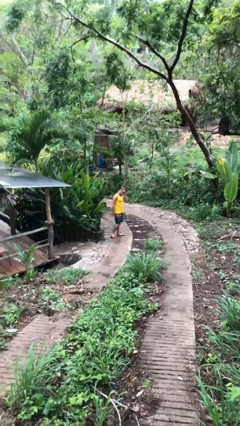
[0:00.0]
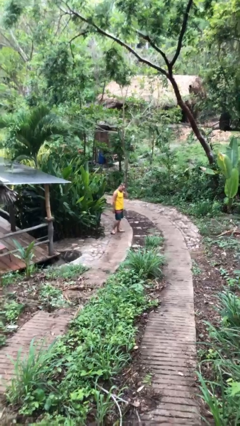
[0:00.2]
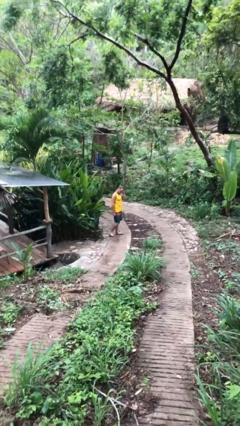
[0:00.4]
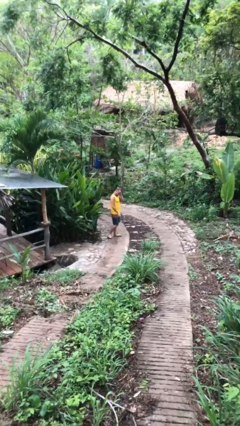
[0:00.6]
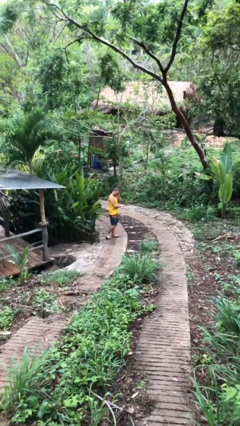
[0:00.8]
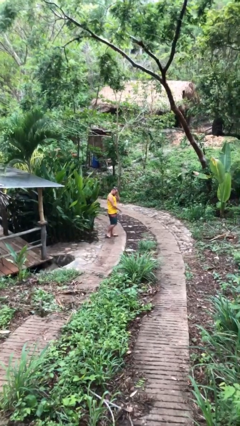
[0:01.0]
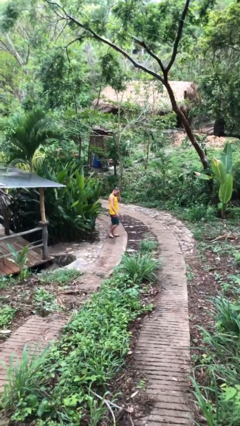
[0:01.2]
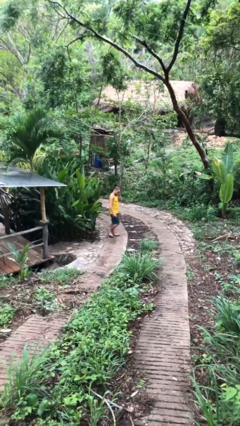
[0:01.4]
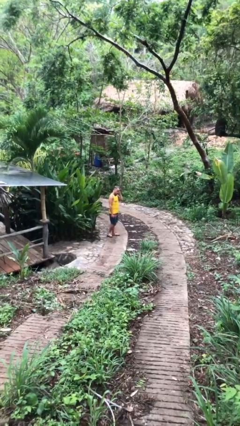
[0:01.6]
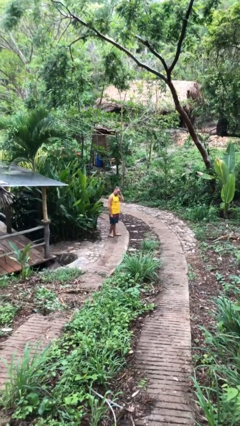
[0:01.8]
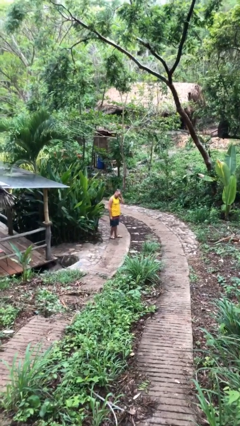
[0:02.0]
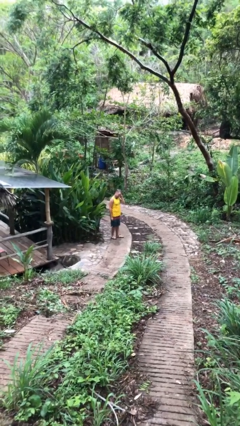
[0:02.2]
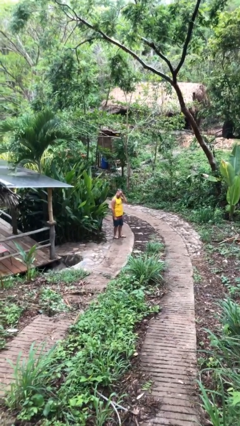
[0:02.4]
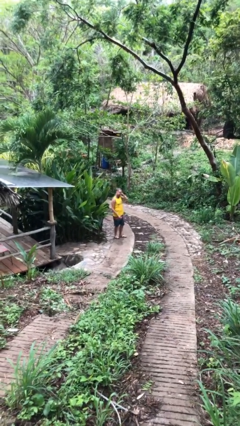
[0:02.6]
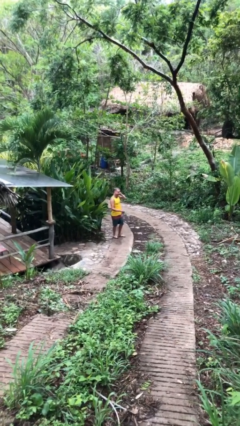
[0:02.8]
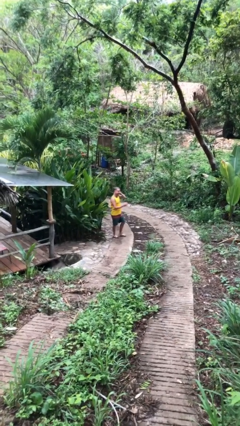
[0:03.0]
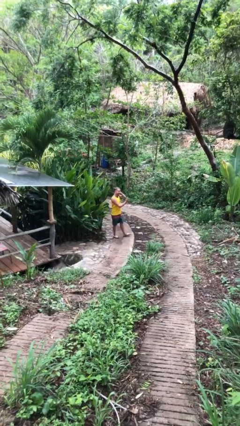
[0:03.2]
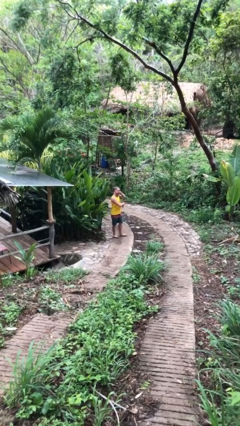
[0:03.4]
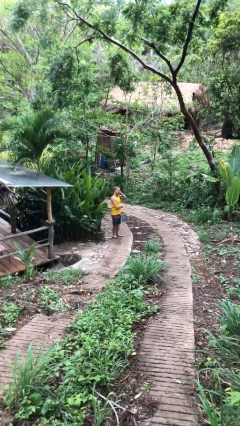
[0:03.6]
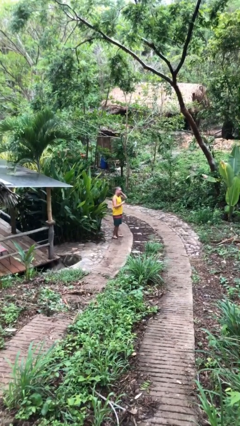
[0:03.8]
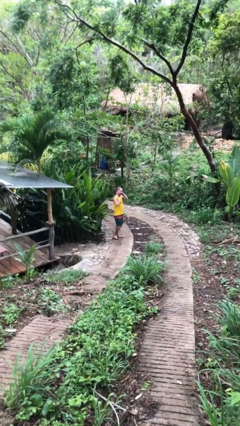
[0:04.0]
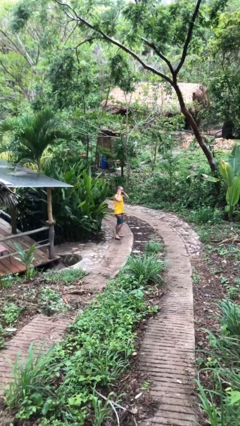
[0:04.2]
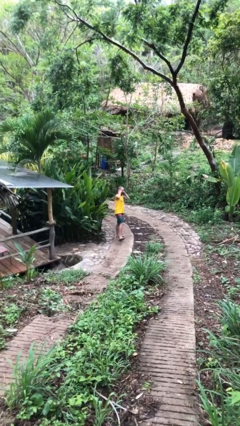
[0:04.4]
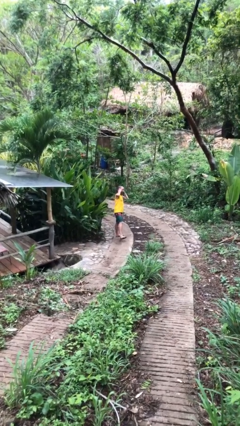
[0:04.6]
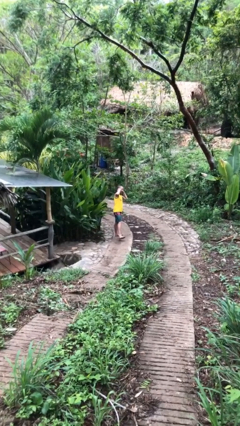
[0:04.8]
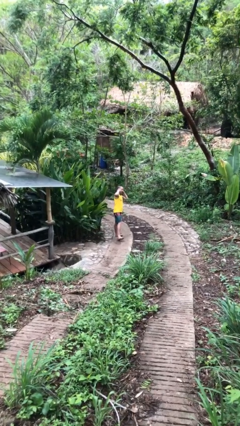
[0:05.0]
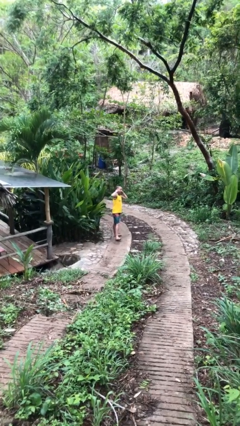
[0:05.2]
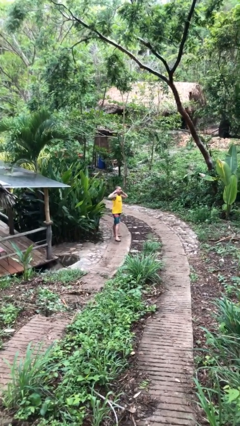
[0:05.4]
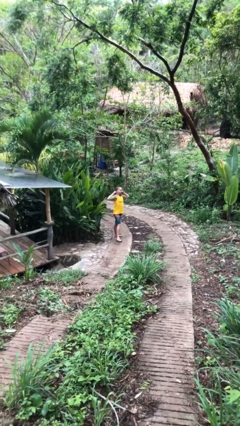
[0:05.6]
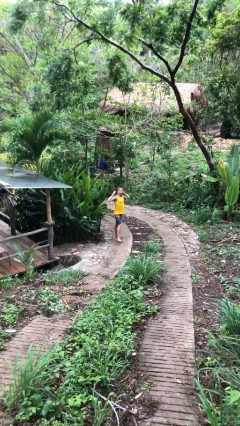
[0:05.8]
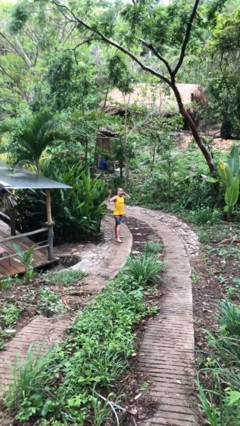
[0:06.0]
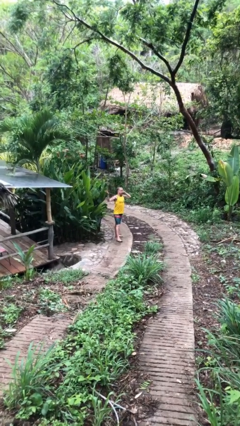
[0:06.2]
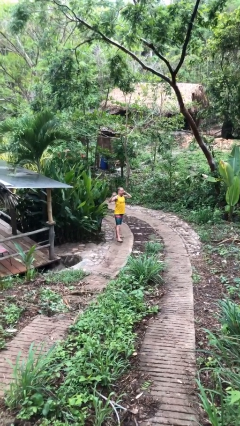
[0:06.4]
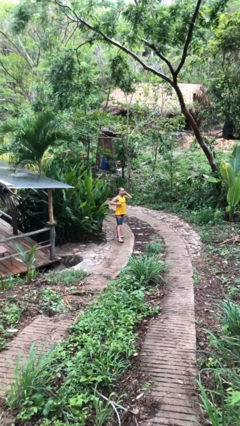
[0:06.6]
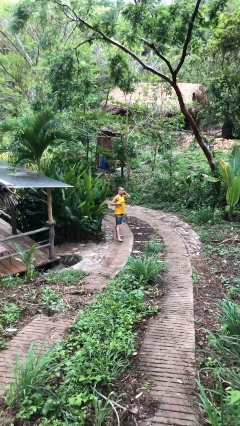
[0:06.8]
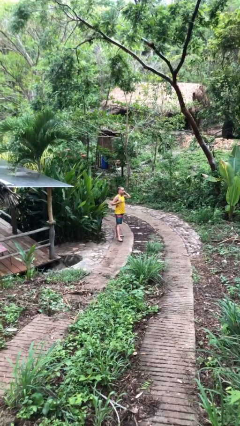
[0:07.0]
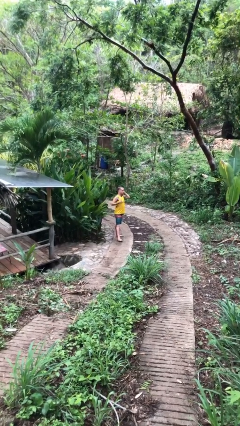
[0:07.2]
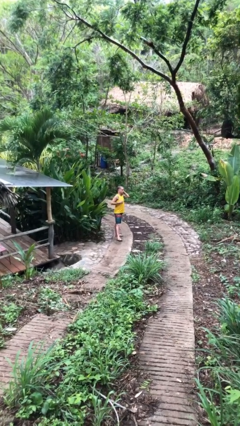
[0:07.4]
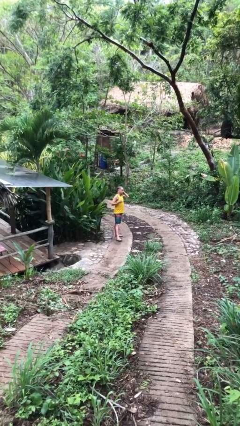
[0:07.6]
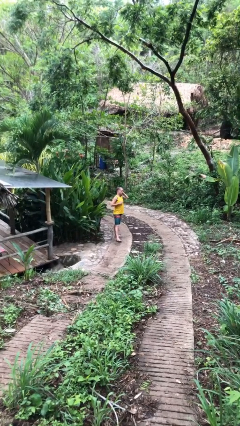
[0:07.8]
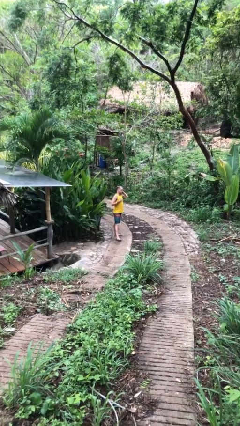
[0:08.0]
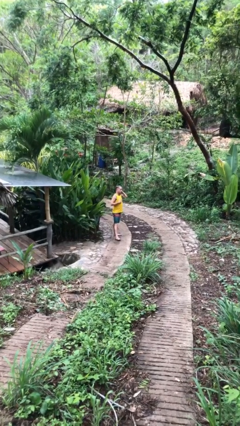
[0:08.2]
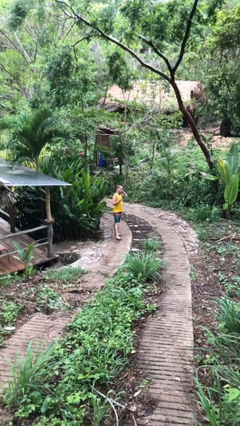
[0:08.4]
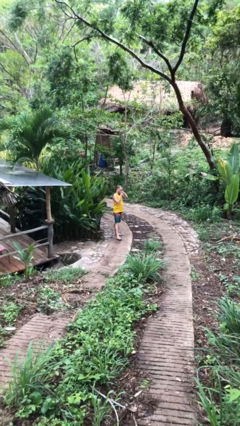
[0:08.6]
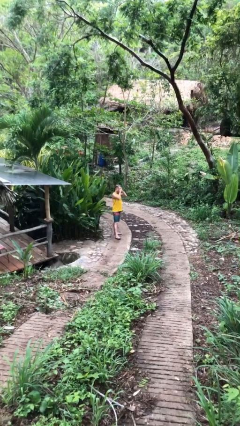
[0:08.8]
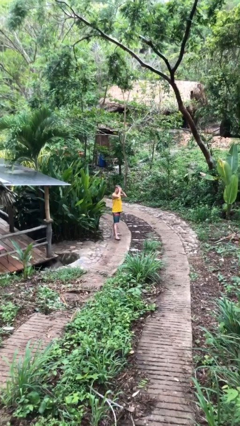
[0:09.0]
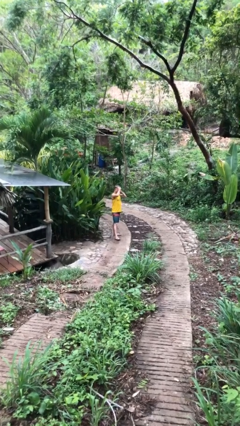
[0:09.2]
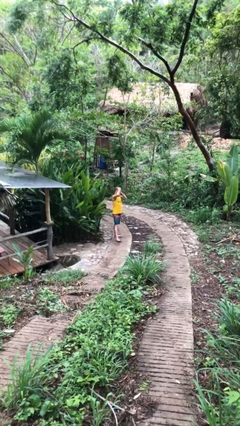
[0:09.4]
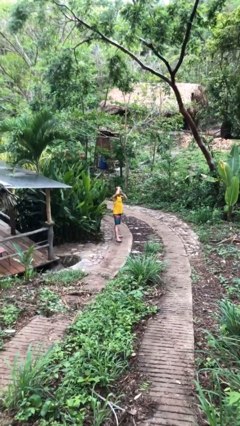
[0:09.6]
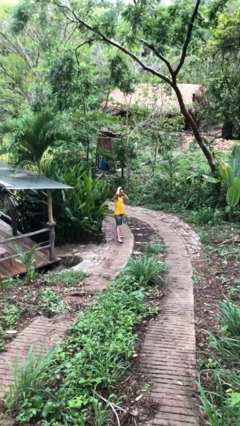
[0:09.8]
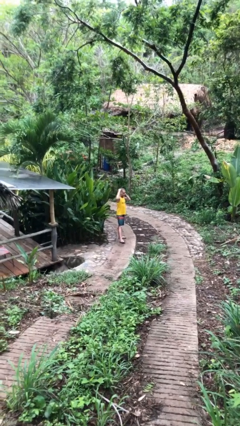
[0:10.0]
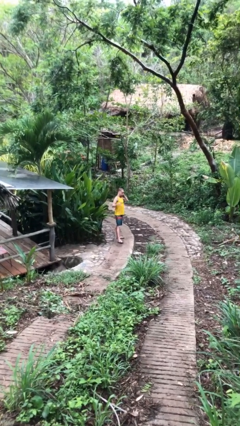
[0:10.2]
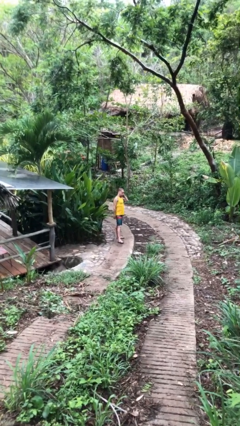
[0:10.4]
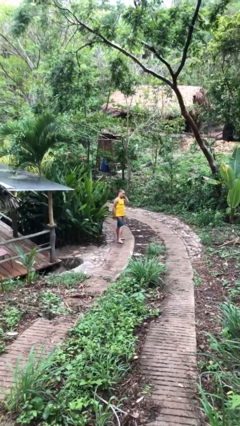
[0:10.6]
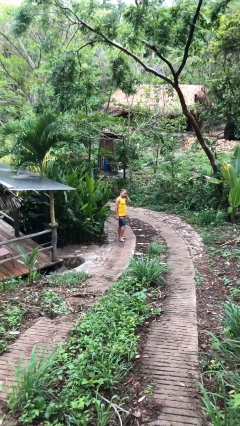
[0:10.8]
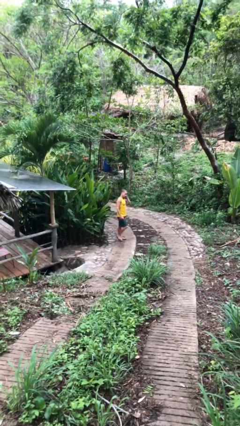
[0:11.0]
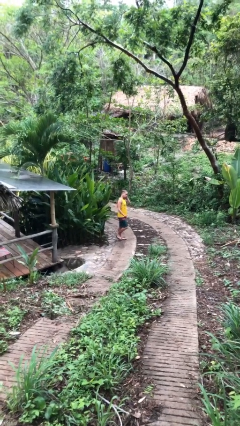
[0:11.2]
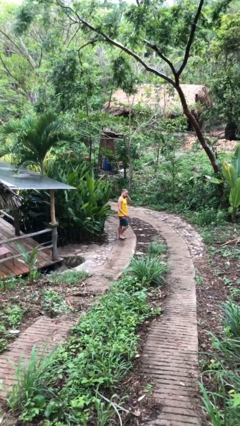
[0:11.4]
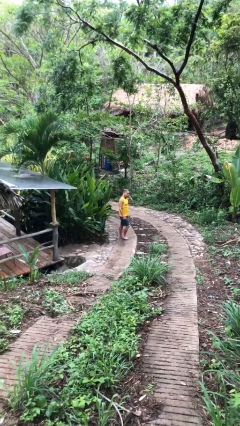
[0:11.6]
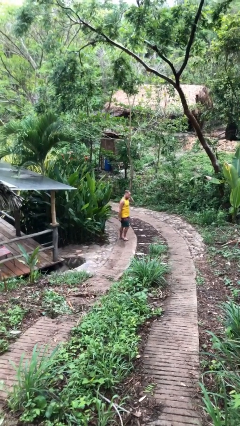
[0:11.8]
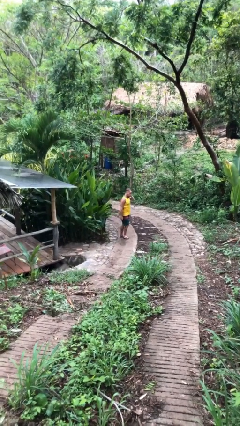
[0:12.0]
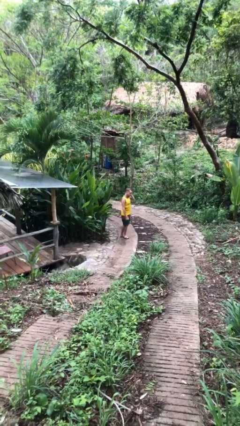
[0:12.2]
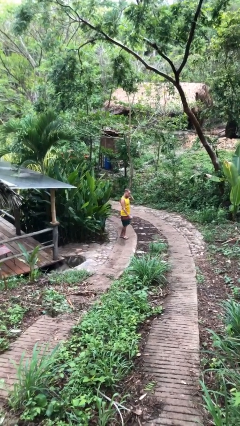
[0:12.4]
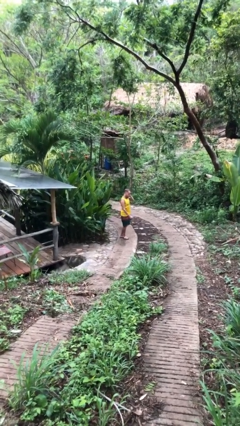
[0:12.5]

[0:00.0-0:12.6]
person talks on phone

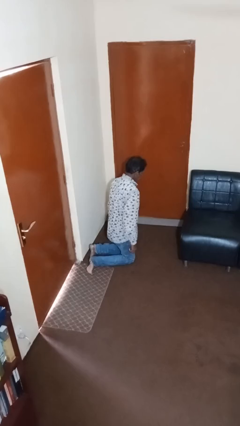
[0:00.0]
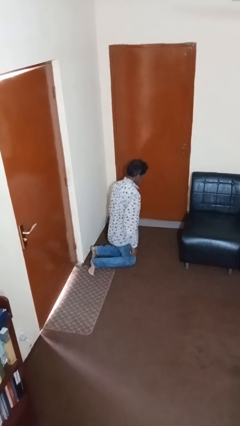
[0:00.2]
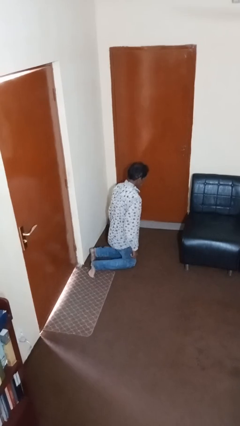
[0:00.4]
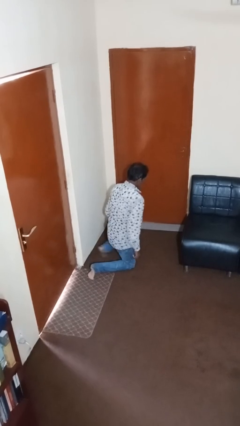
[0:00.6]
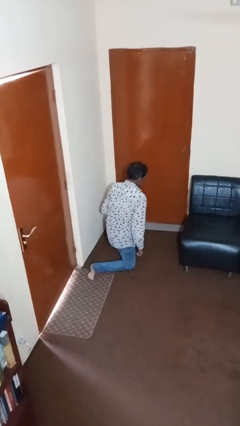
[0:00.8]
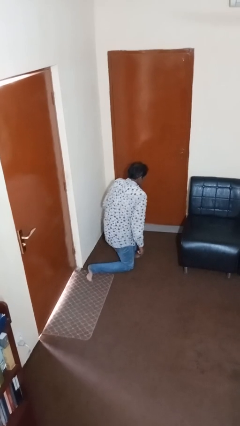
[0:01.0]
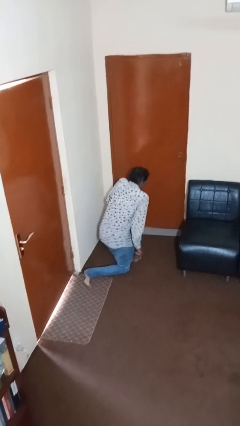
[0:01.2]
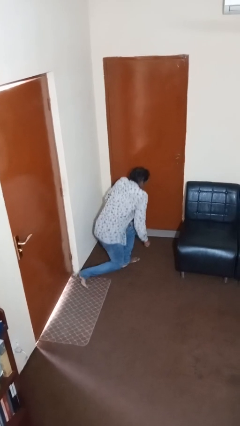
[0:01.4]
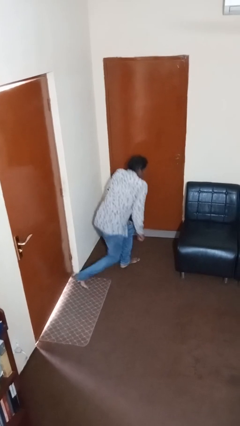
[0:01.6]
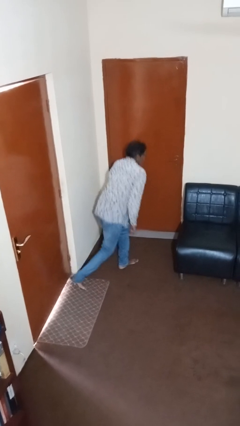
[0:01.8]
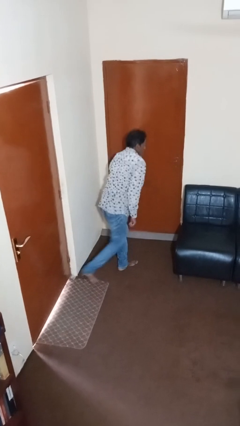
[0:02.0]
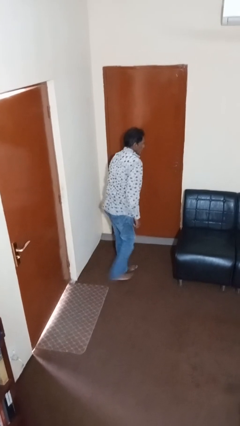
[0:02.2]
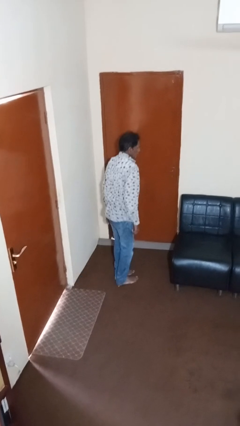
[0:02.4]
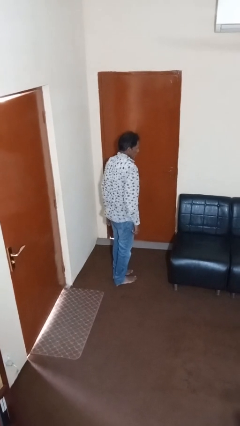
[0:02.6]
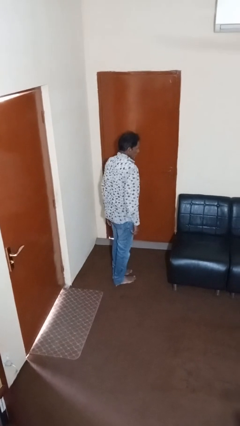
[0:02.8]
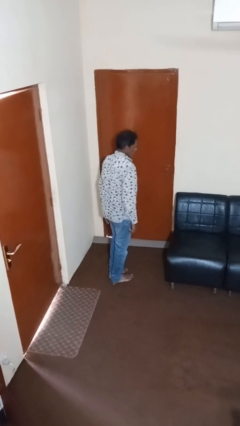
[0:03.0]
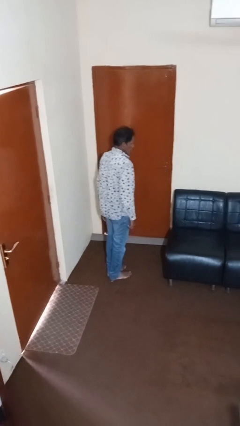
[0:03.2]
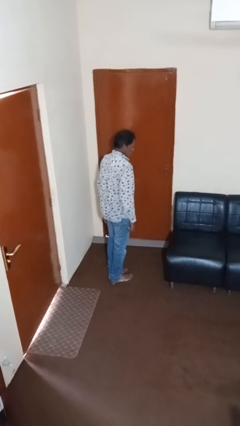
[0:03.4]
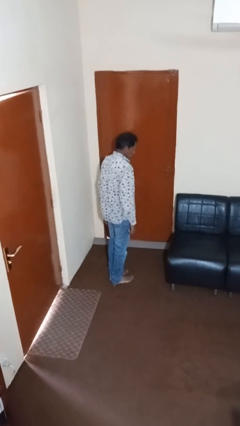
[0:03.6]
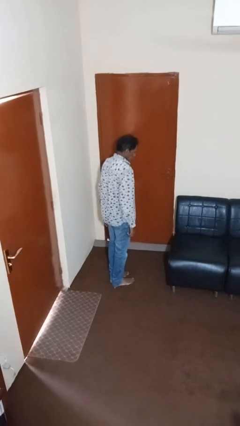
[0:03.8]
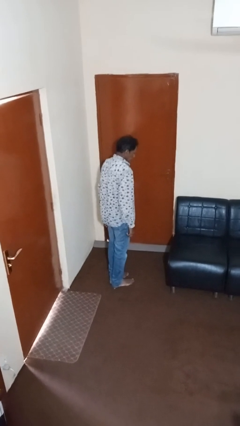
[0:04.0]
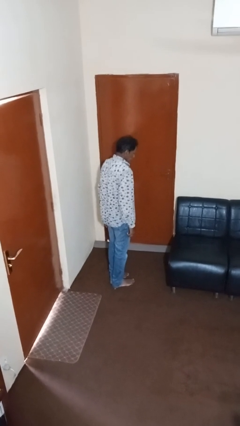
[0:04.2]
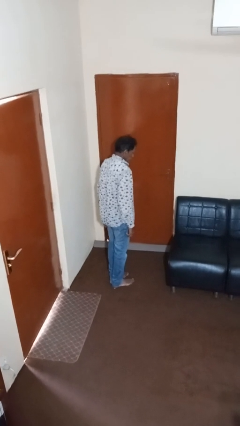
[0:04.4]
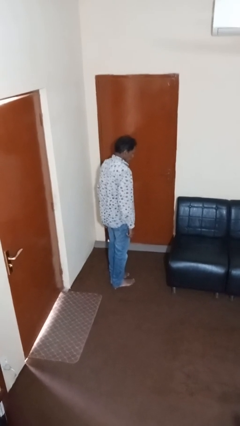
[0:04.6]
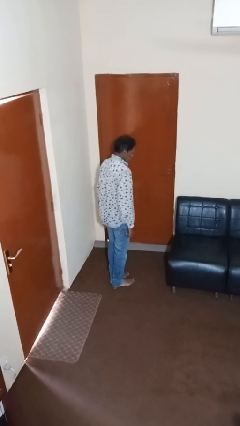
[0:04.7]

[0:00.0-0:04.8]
person stands up

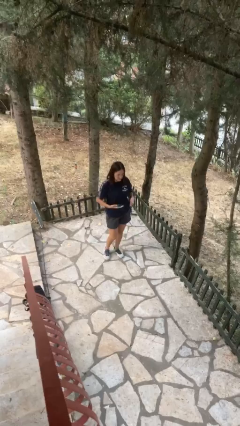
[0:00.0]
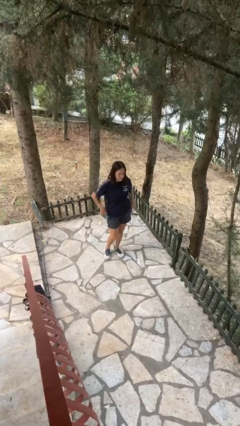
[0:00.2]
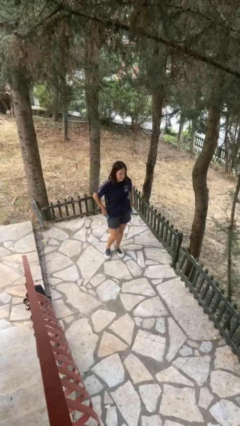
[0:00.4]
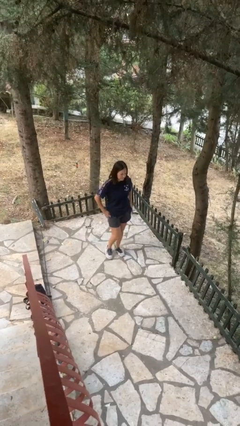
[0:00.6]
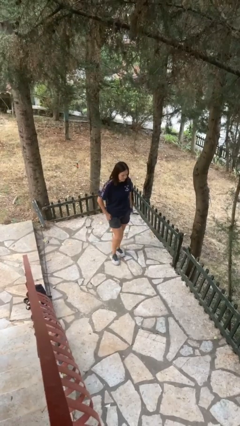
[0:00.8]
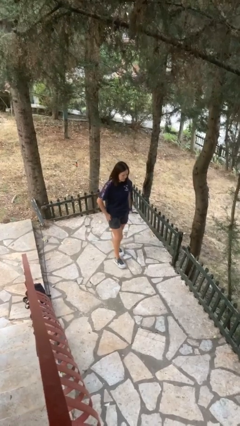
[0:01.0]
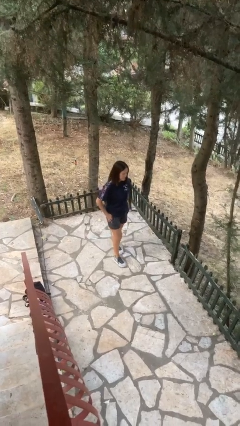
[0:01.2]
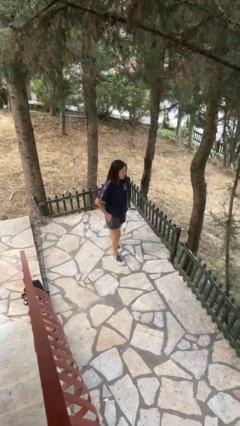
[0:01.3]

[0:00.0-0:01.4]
person puts phone into pocket
